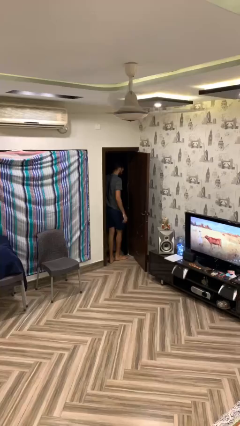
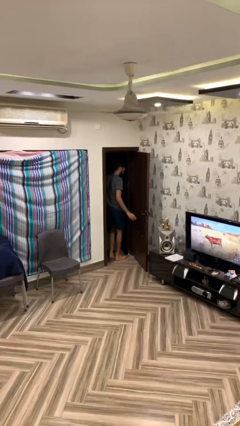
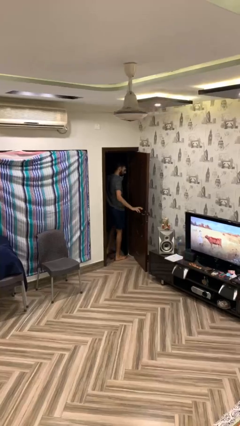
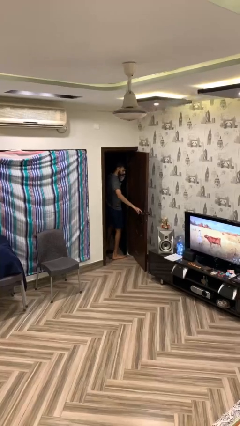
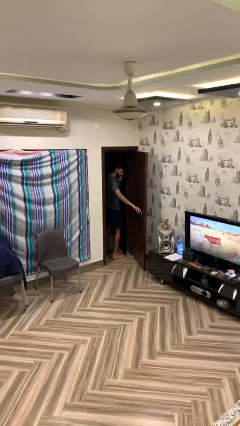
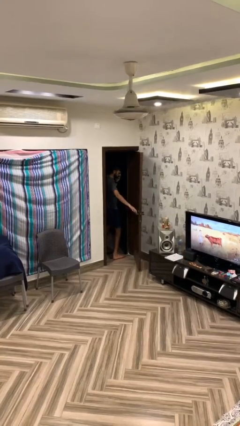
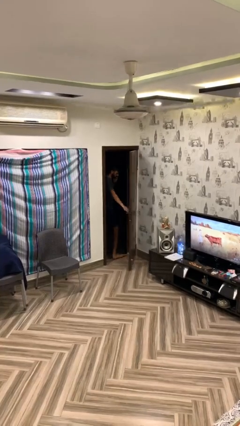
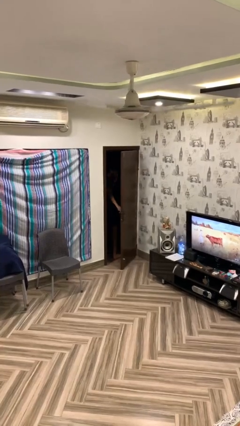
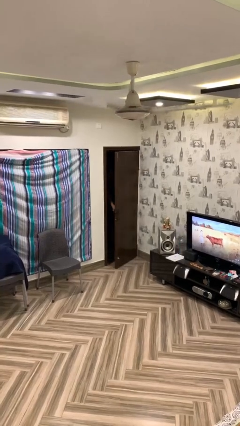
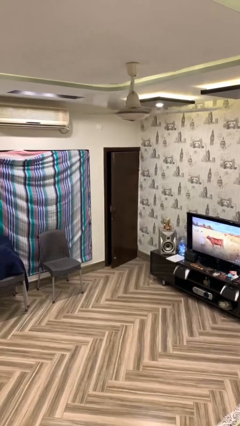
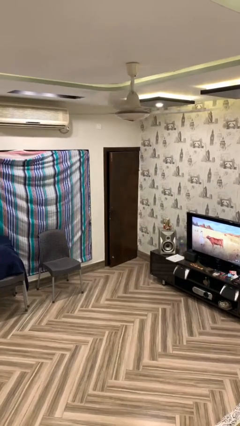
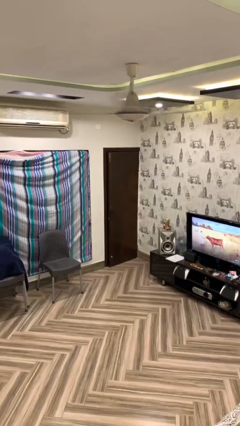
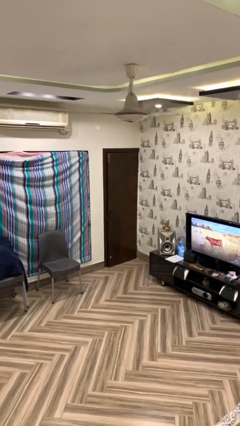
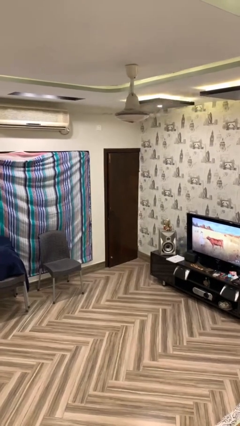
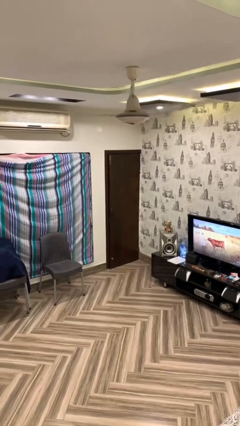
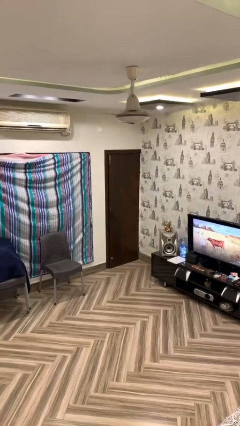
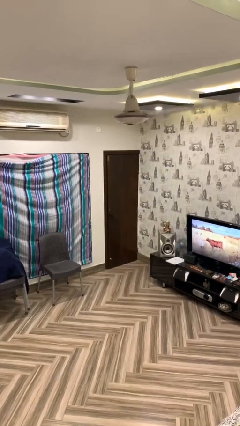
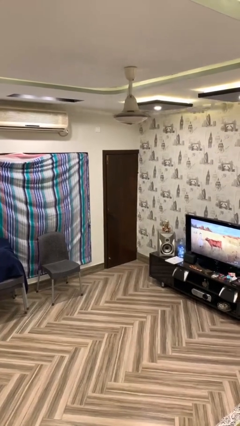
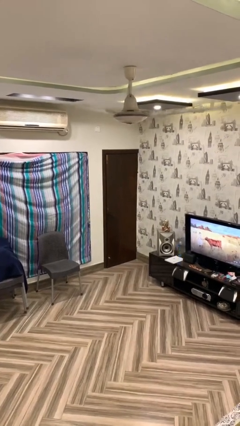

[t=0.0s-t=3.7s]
person closes facility door

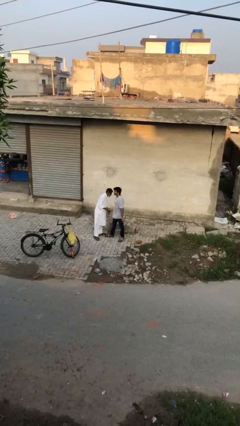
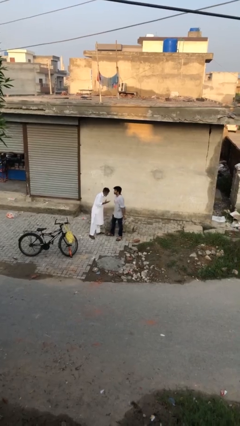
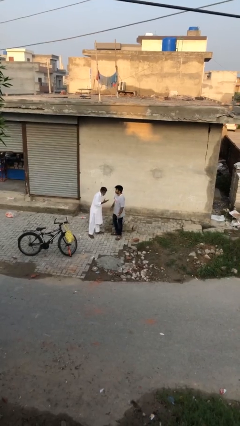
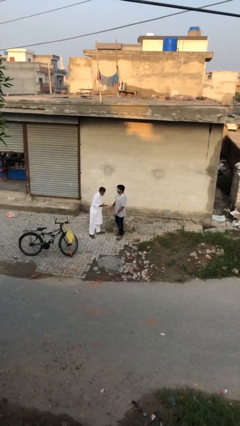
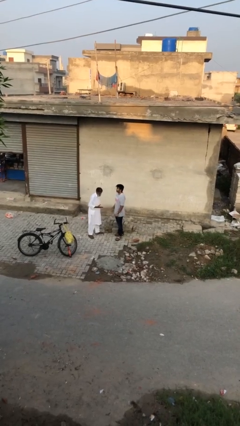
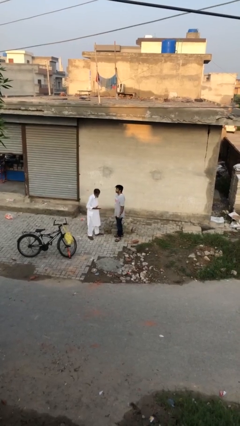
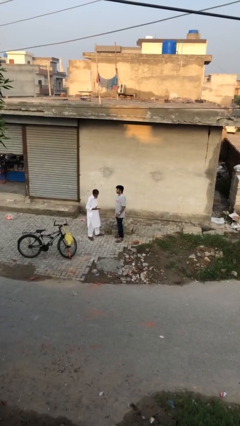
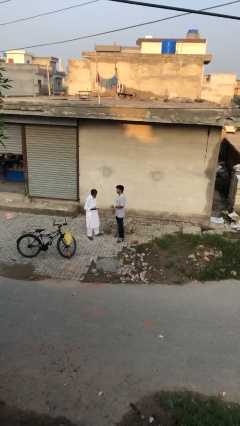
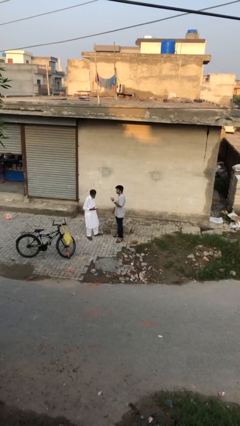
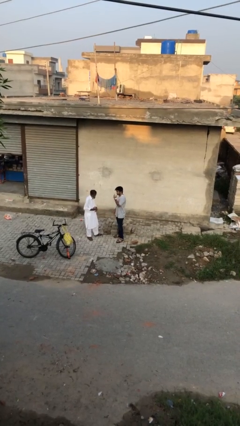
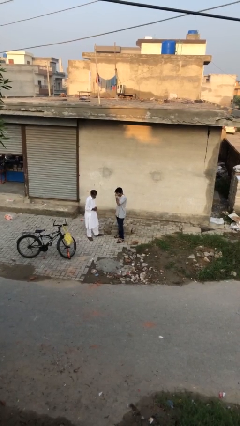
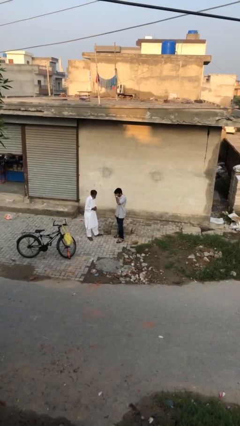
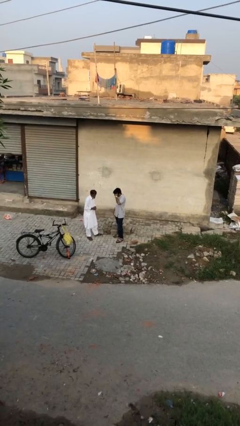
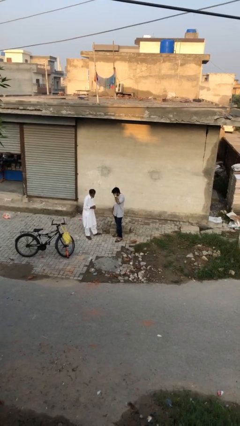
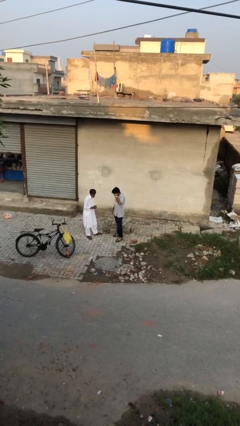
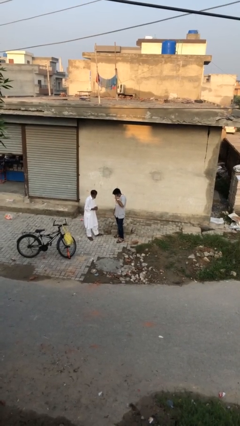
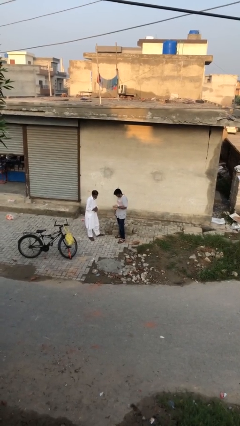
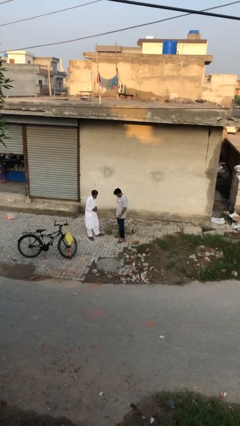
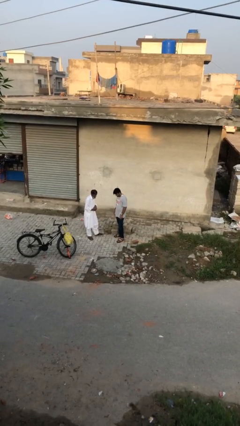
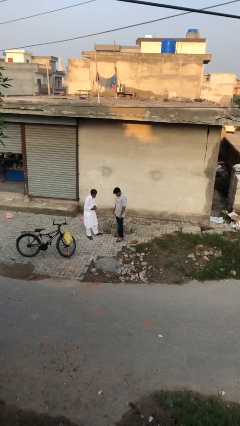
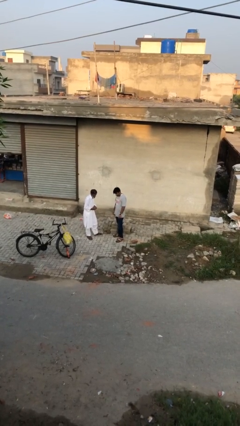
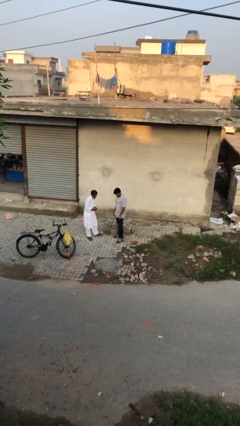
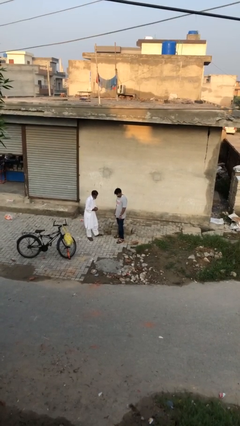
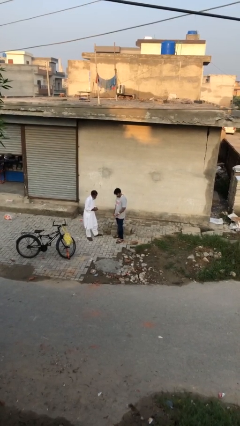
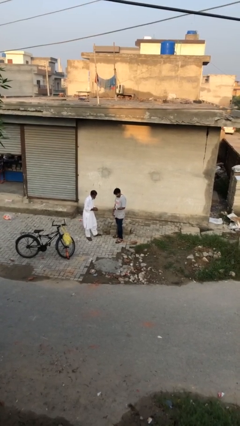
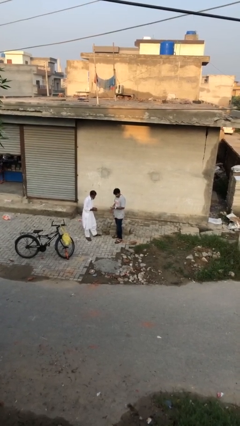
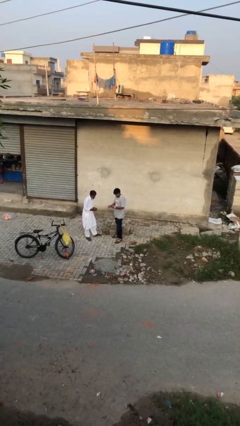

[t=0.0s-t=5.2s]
person talks to person

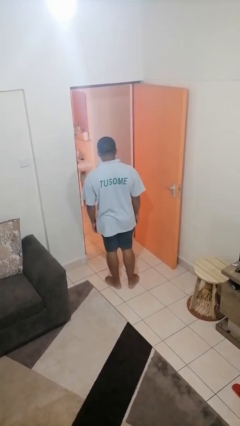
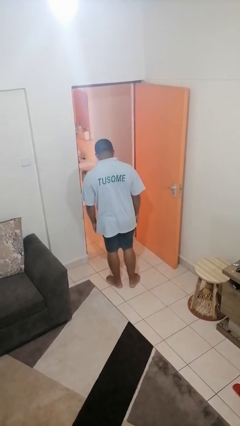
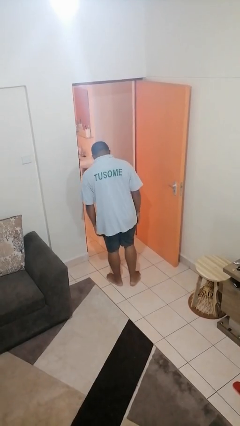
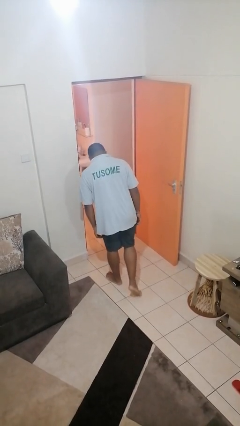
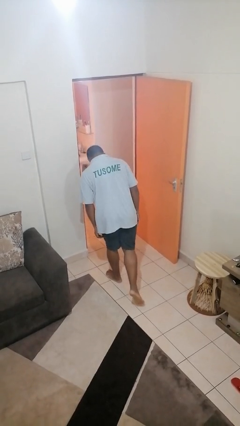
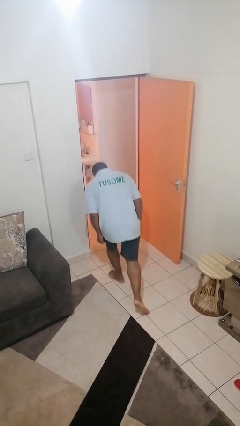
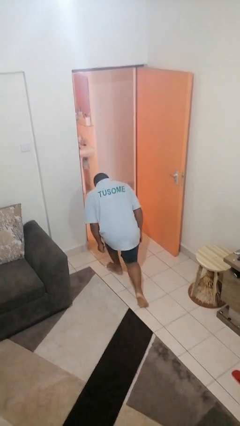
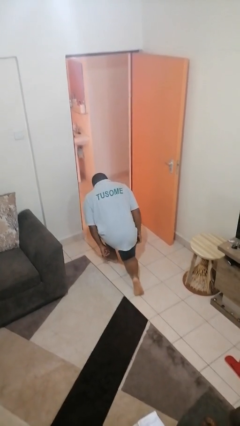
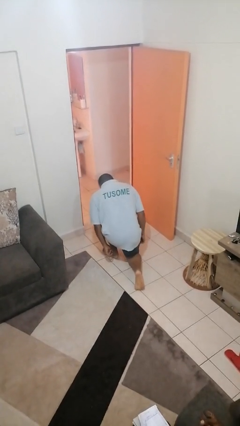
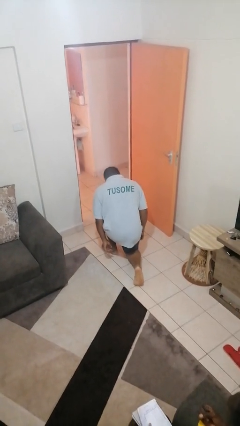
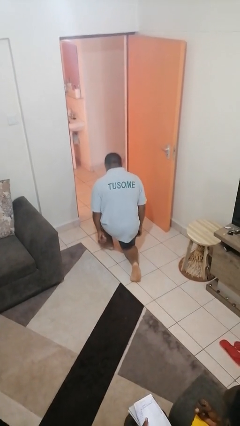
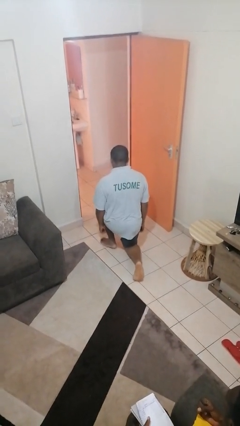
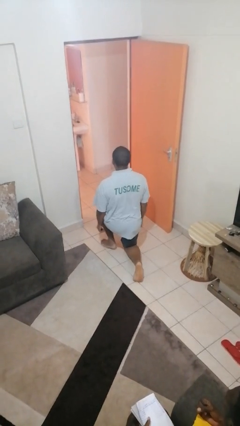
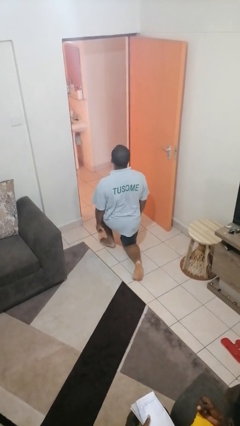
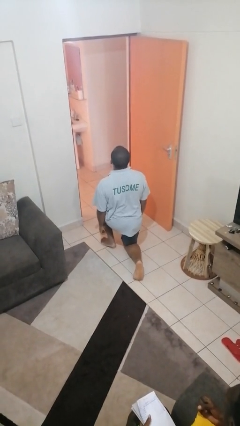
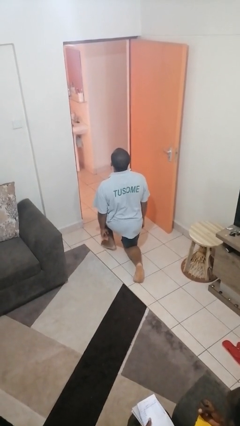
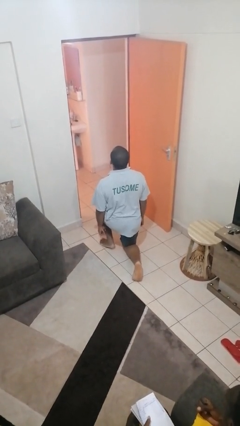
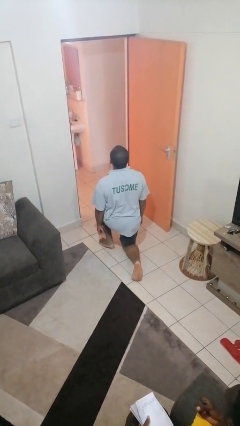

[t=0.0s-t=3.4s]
person kneels

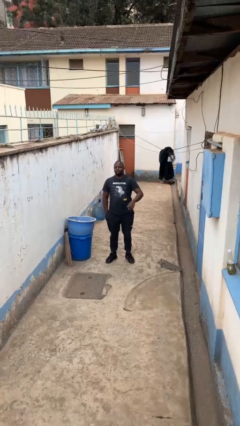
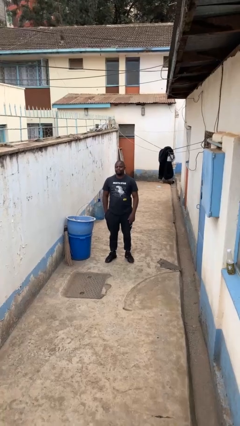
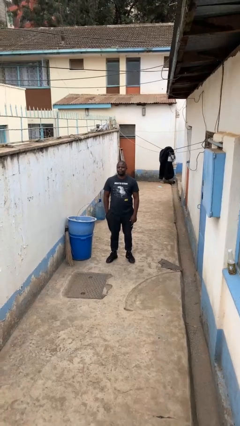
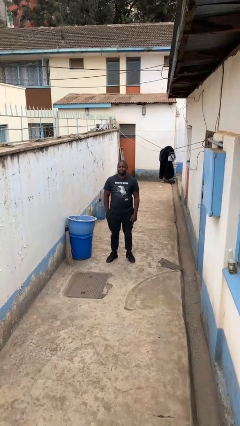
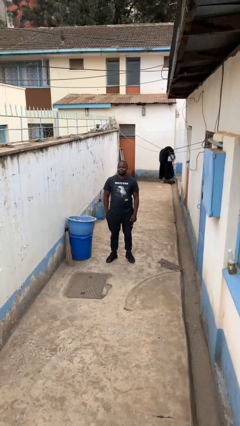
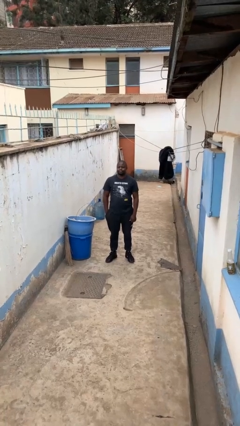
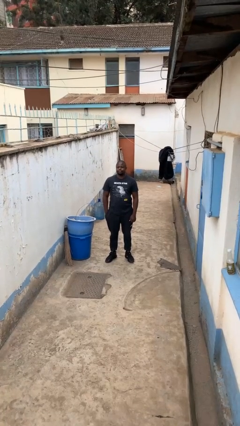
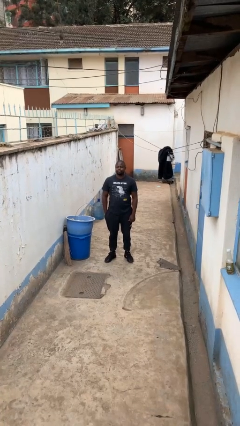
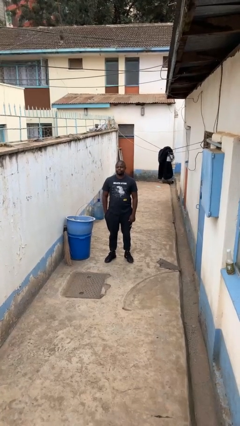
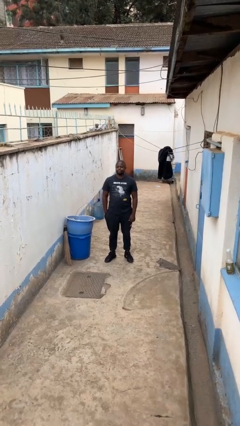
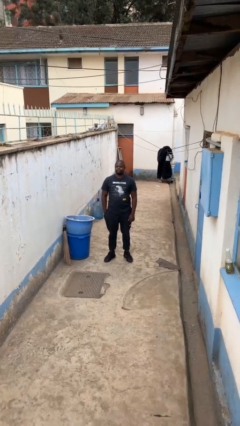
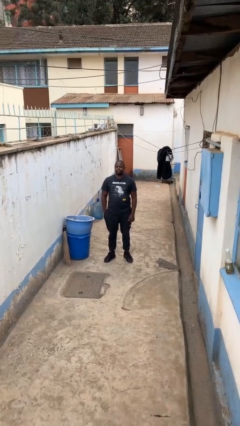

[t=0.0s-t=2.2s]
person gestures lower hand

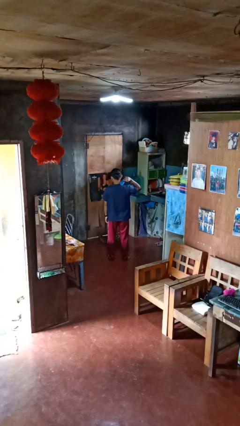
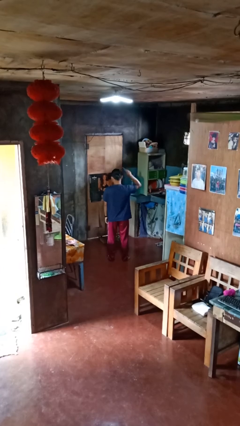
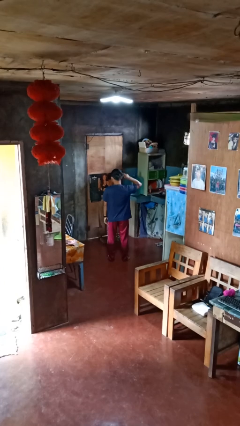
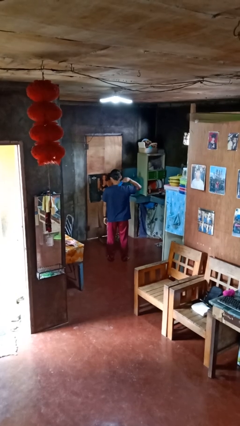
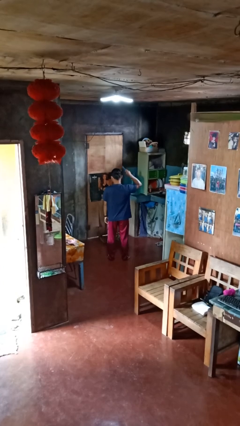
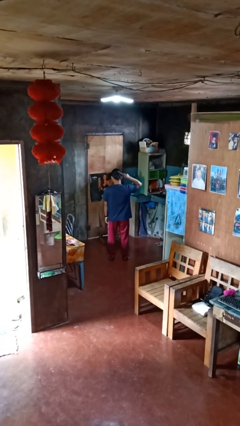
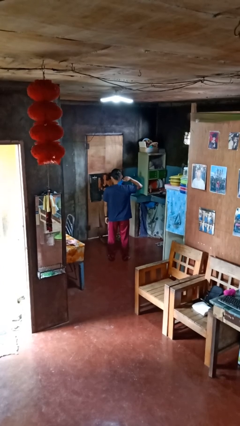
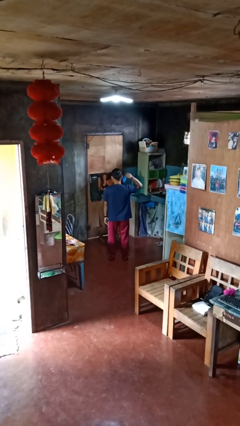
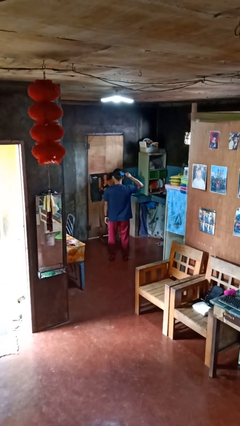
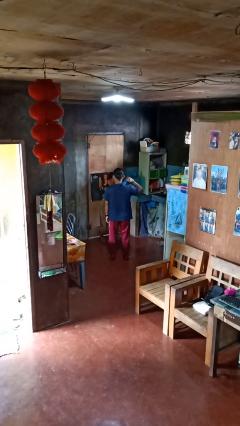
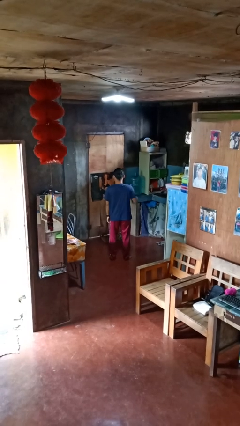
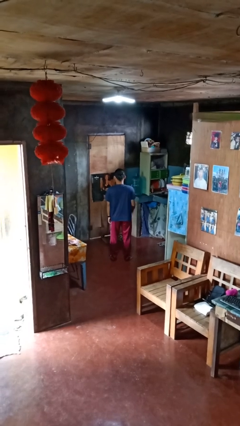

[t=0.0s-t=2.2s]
person brushes hair

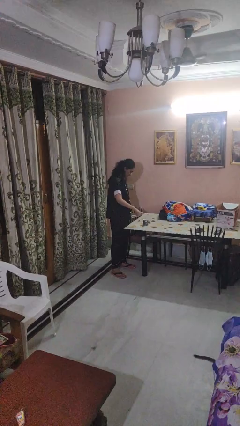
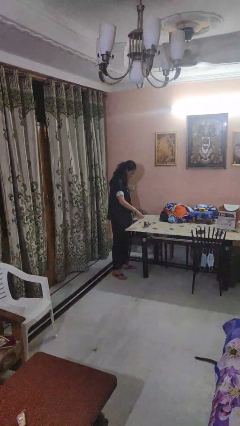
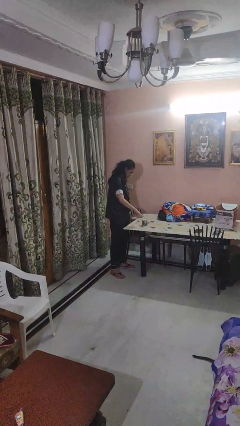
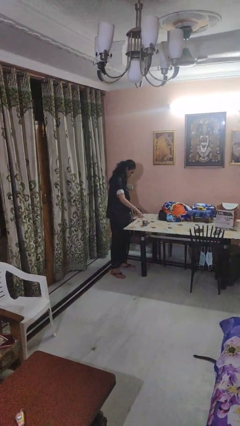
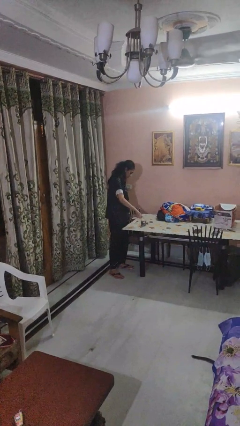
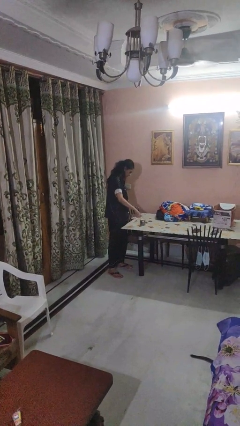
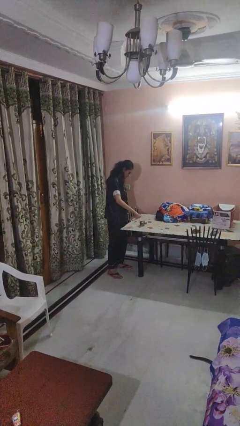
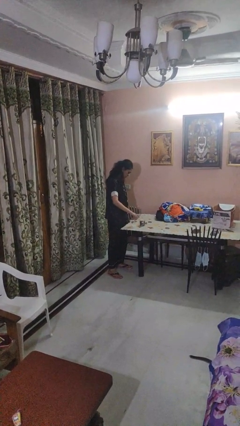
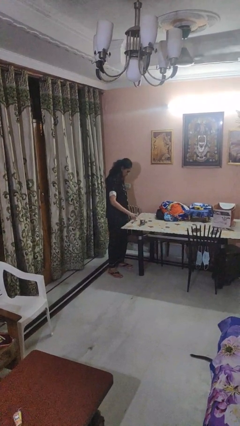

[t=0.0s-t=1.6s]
person pours liquid into cup
